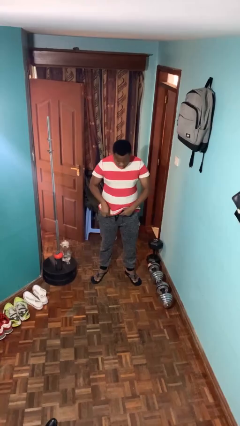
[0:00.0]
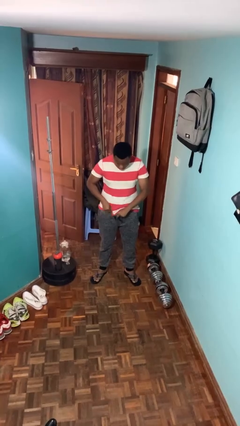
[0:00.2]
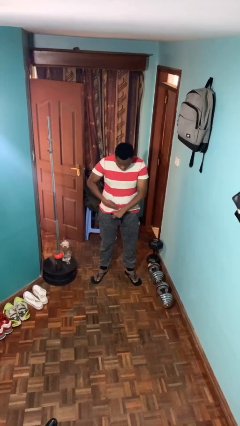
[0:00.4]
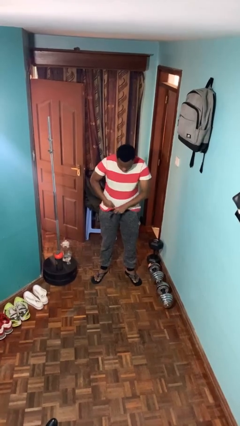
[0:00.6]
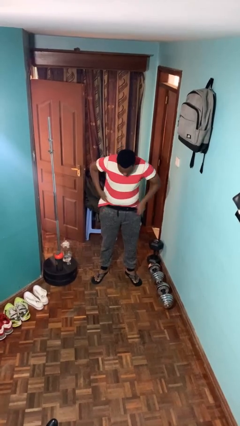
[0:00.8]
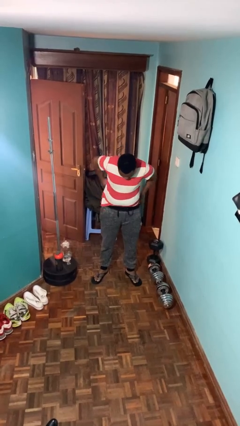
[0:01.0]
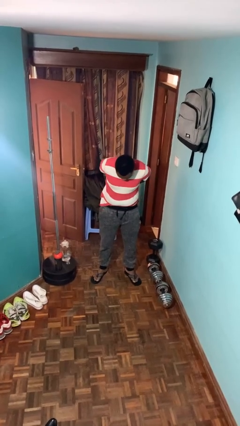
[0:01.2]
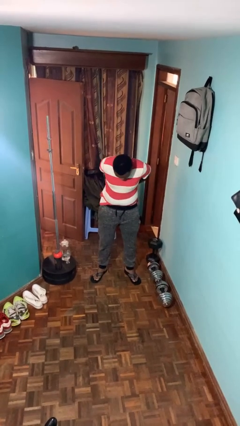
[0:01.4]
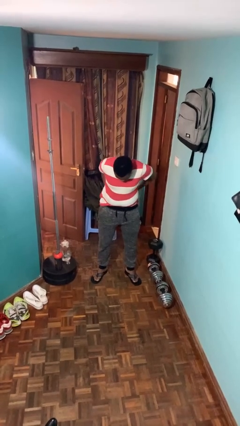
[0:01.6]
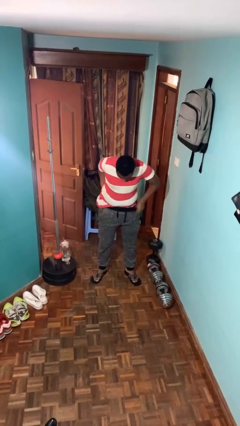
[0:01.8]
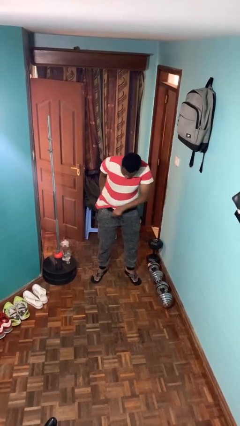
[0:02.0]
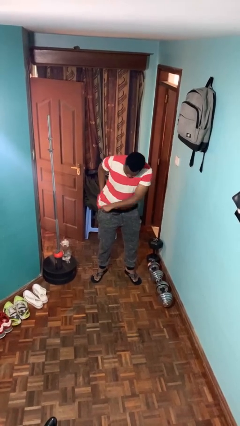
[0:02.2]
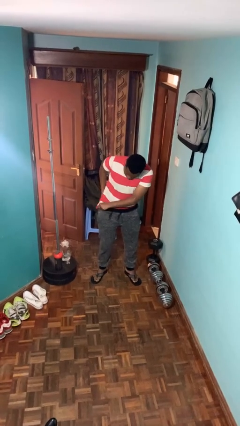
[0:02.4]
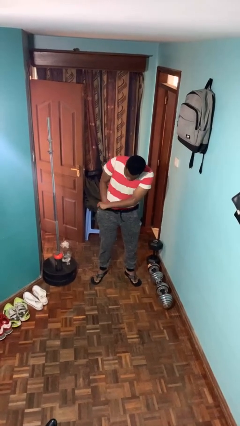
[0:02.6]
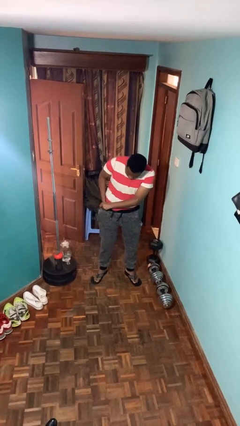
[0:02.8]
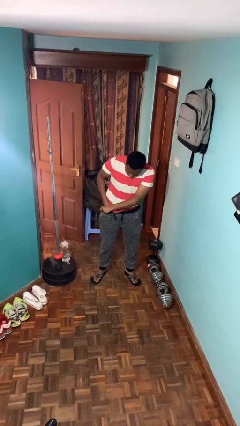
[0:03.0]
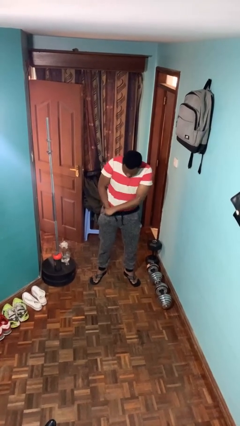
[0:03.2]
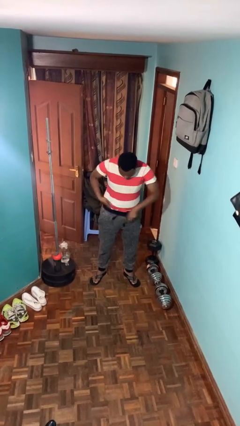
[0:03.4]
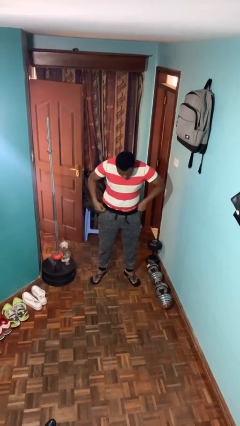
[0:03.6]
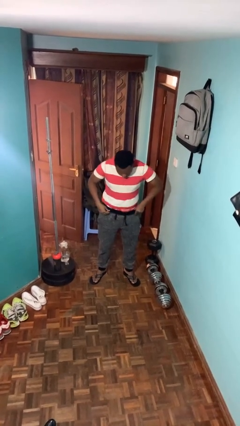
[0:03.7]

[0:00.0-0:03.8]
person tucks in shirt

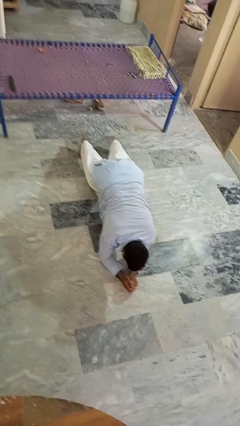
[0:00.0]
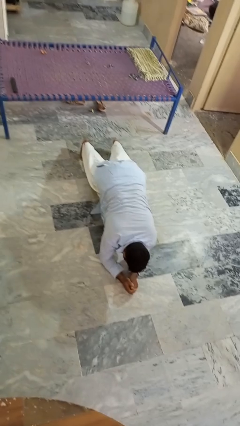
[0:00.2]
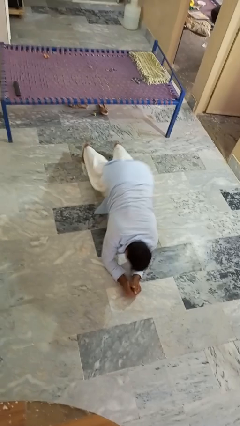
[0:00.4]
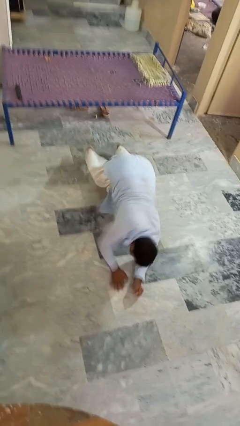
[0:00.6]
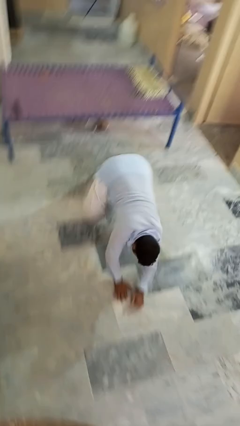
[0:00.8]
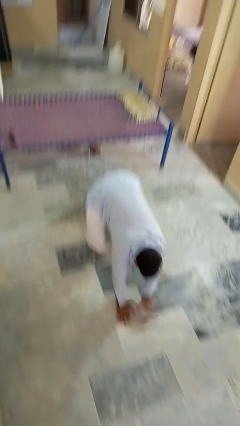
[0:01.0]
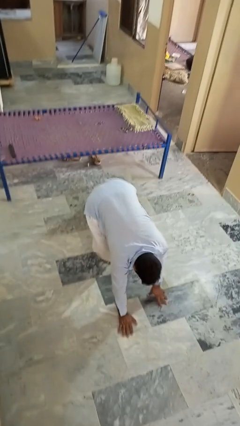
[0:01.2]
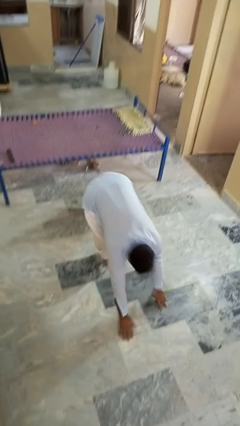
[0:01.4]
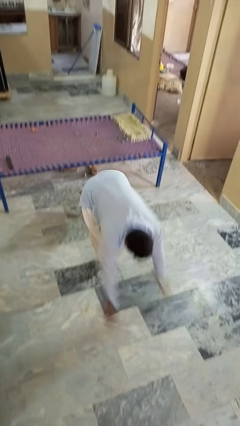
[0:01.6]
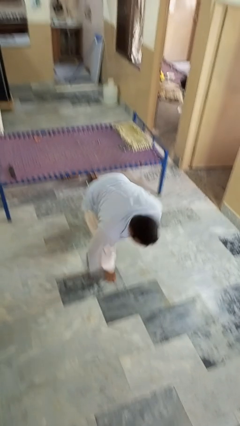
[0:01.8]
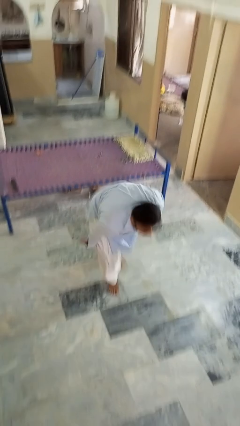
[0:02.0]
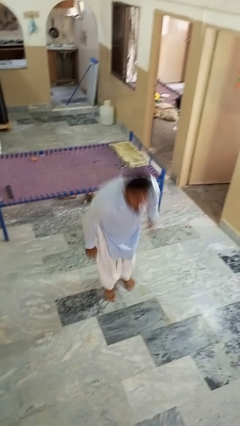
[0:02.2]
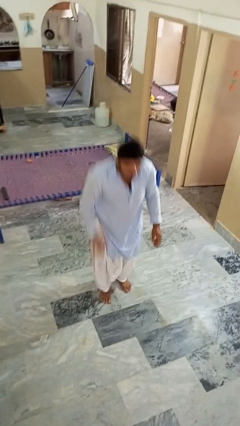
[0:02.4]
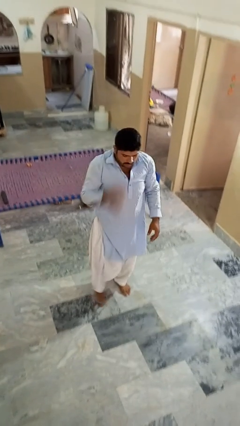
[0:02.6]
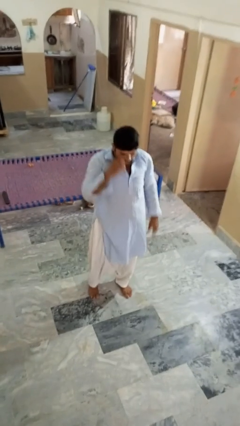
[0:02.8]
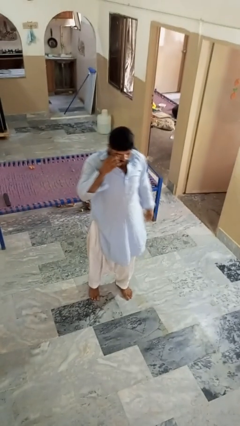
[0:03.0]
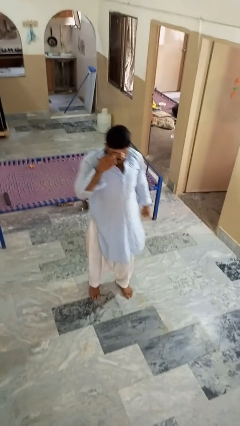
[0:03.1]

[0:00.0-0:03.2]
person stands up from floor

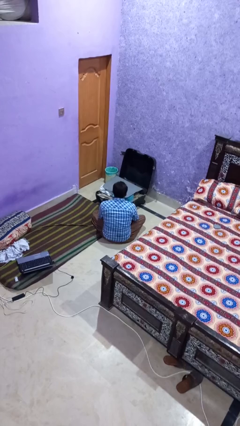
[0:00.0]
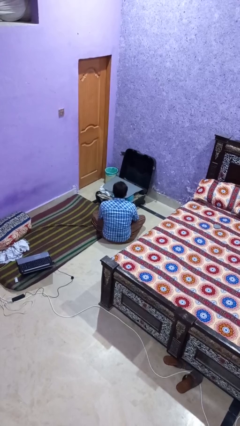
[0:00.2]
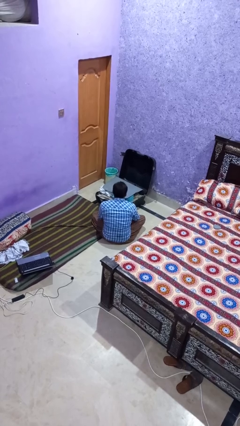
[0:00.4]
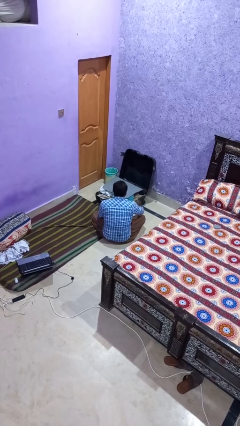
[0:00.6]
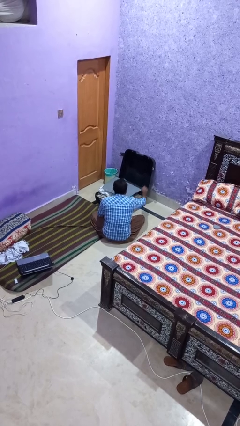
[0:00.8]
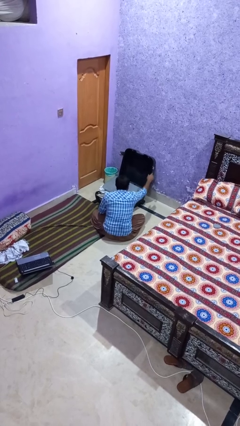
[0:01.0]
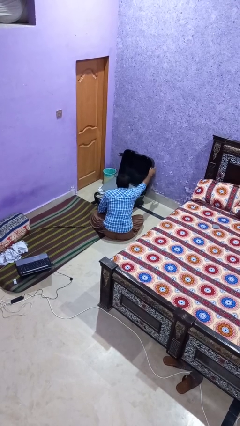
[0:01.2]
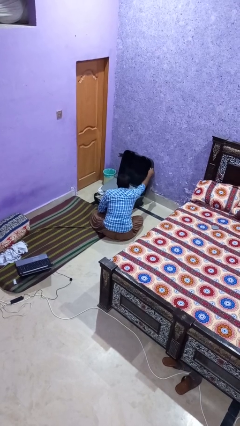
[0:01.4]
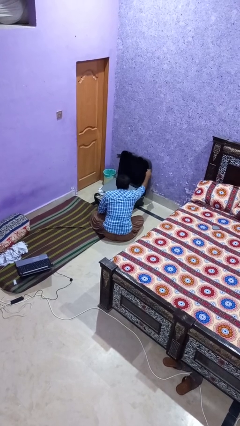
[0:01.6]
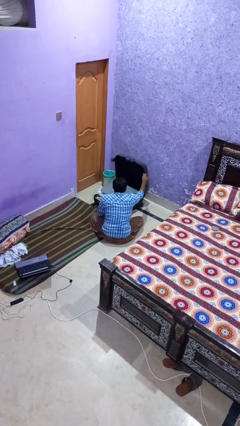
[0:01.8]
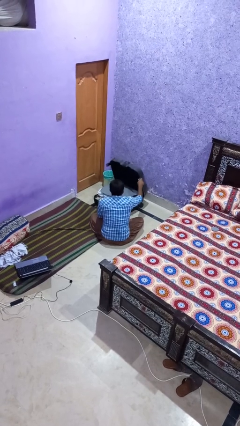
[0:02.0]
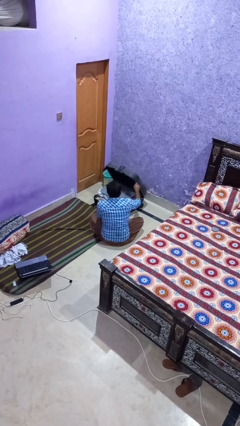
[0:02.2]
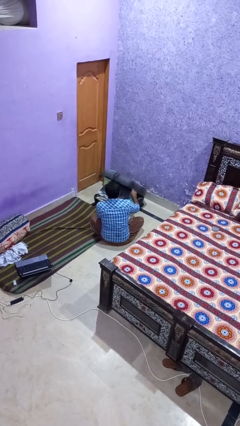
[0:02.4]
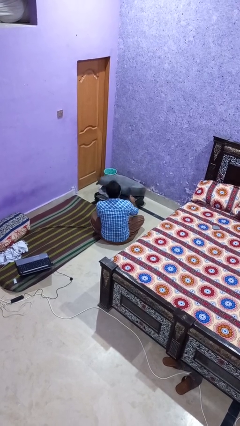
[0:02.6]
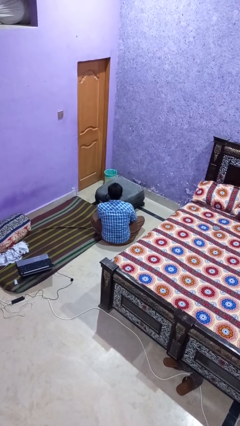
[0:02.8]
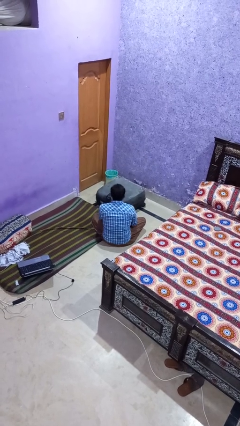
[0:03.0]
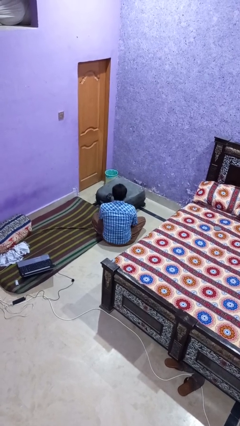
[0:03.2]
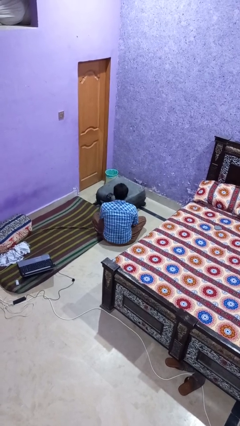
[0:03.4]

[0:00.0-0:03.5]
person closes suitcase

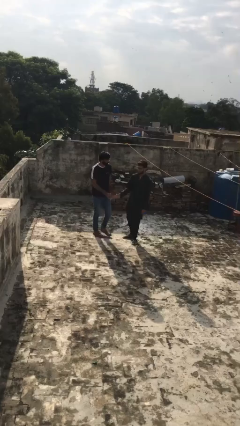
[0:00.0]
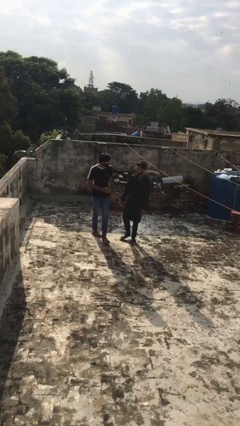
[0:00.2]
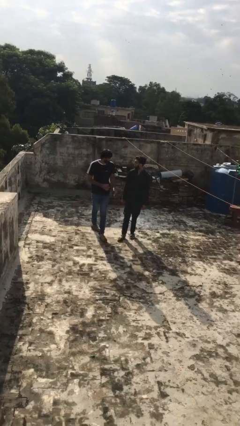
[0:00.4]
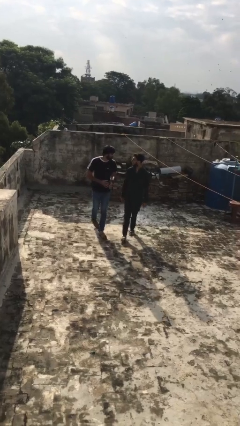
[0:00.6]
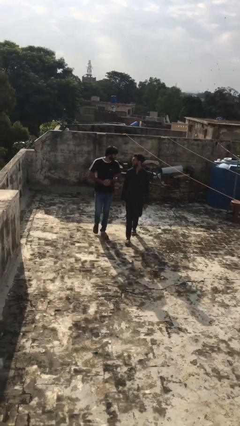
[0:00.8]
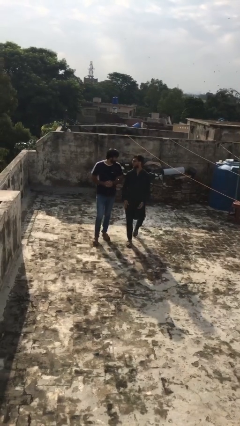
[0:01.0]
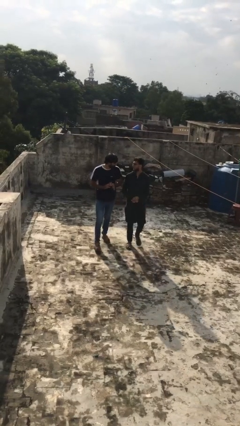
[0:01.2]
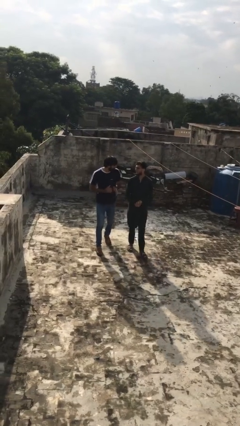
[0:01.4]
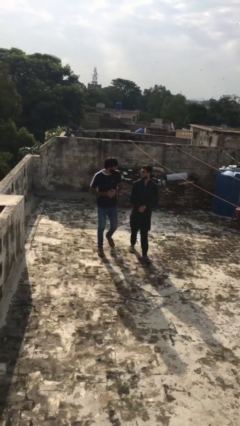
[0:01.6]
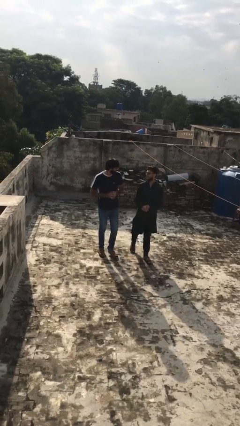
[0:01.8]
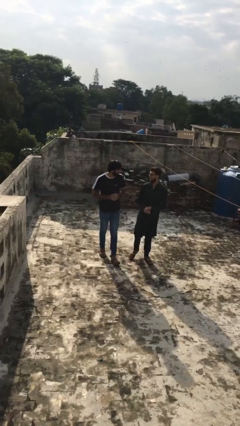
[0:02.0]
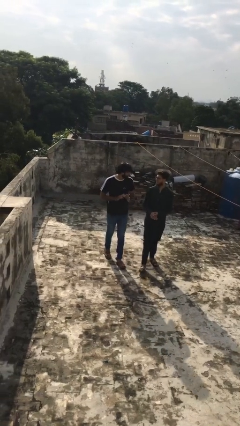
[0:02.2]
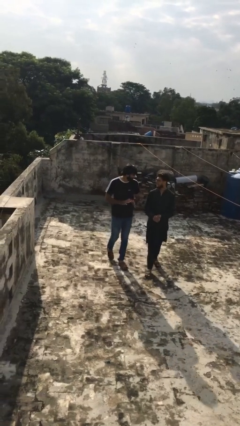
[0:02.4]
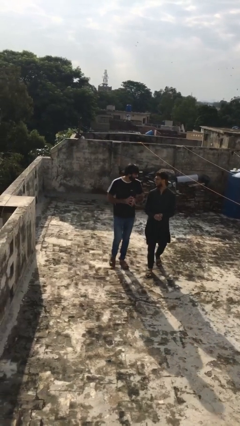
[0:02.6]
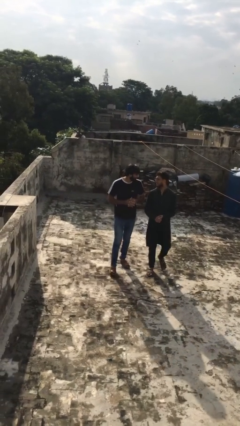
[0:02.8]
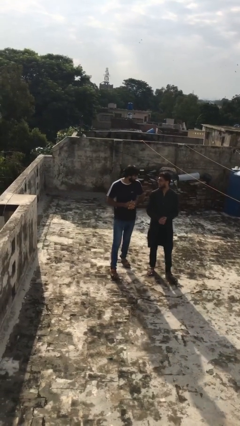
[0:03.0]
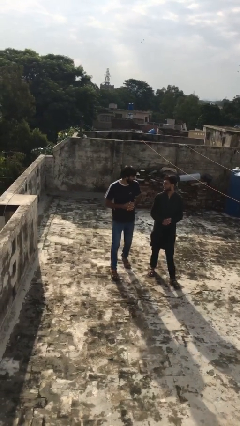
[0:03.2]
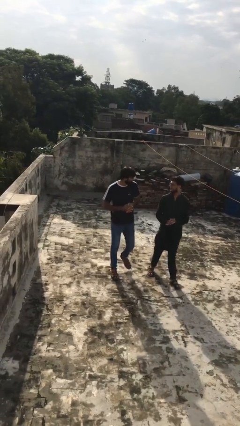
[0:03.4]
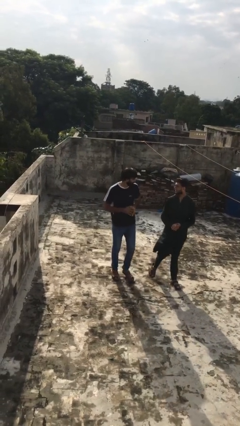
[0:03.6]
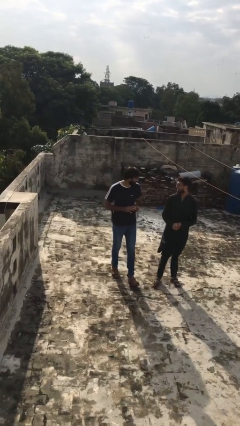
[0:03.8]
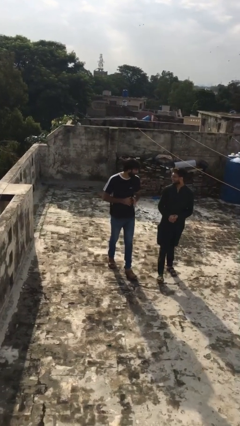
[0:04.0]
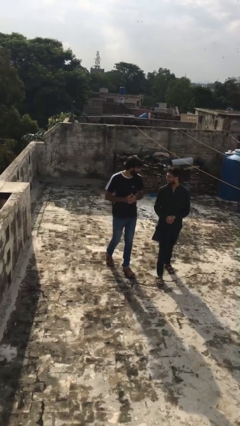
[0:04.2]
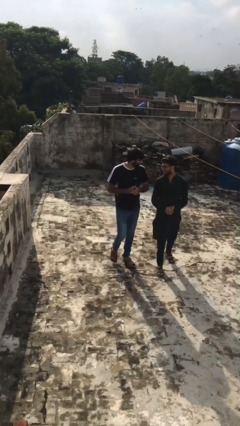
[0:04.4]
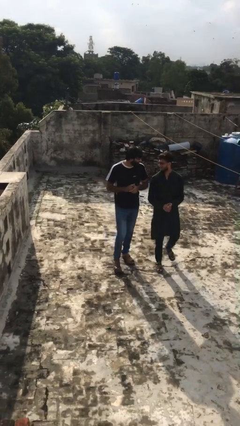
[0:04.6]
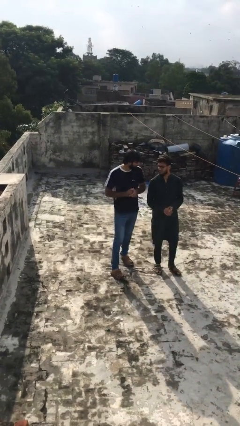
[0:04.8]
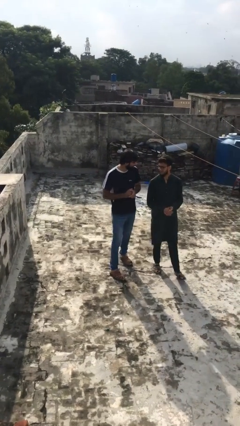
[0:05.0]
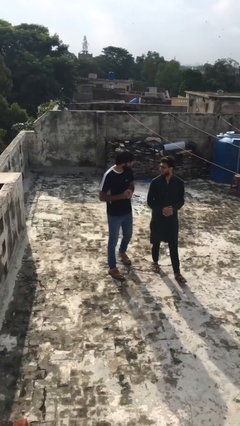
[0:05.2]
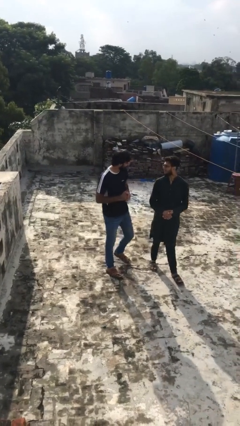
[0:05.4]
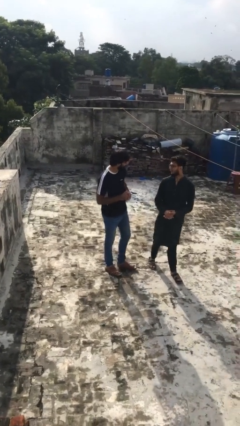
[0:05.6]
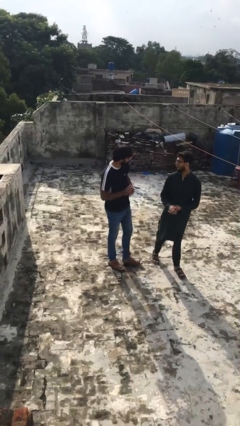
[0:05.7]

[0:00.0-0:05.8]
person talks to person

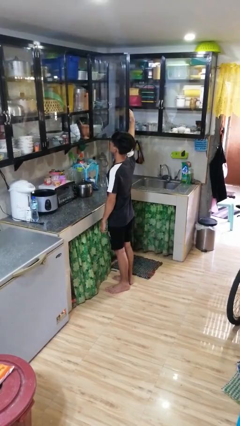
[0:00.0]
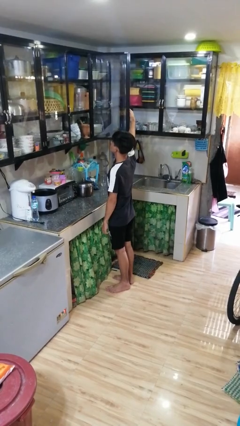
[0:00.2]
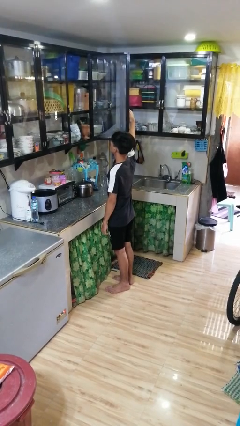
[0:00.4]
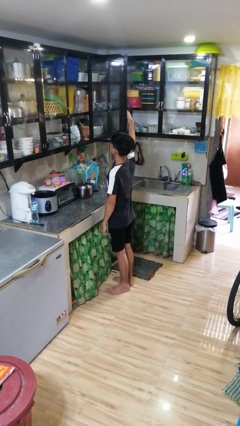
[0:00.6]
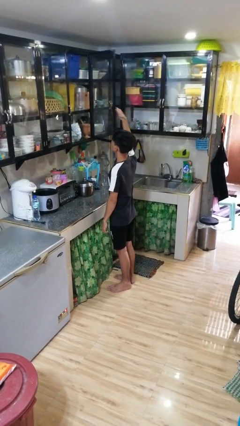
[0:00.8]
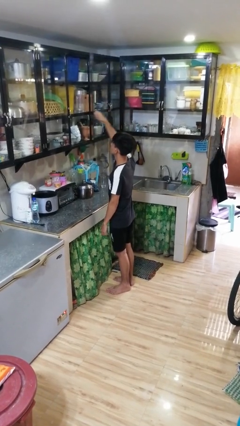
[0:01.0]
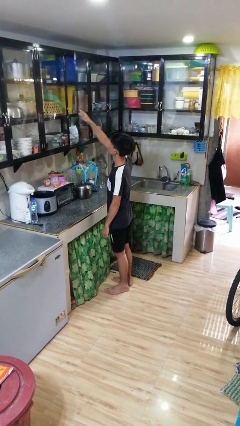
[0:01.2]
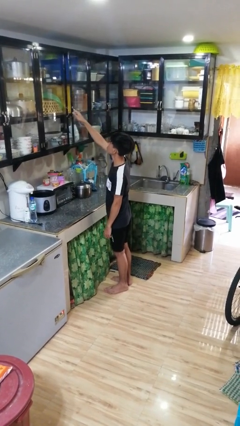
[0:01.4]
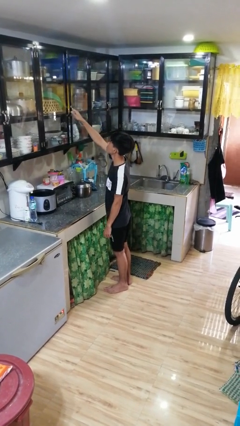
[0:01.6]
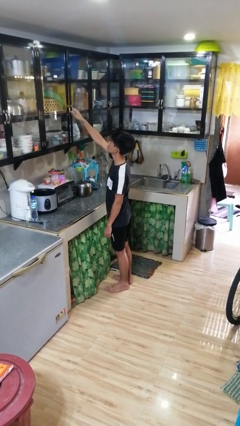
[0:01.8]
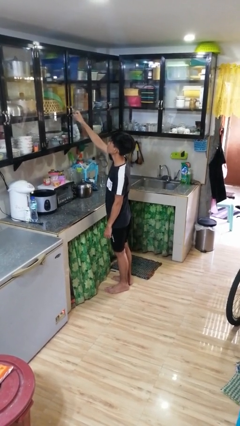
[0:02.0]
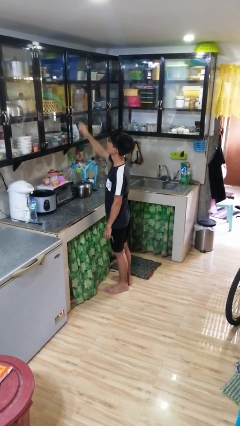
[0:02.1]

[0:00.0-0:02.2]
person closes cabinet
